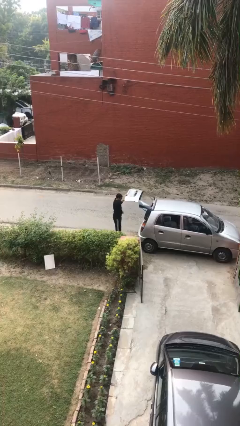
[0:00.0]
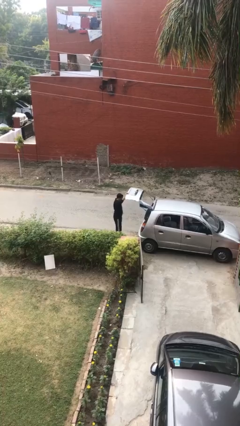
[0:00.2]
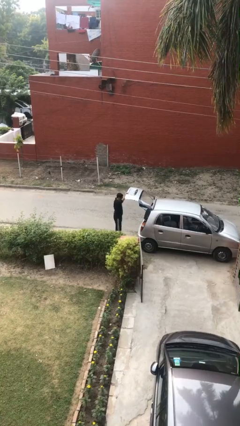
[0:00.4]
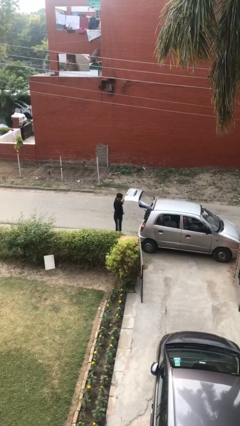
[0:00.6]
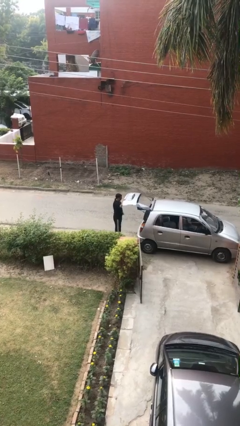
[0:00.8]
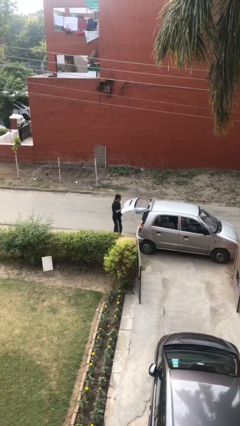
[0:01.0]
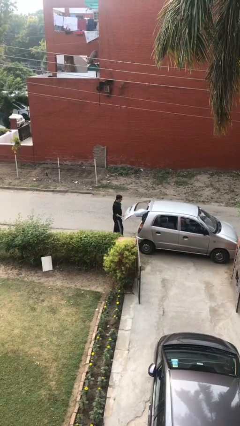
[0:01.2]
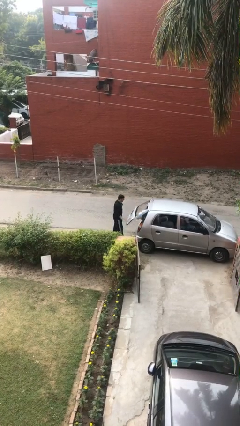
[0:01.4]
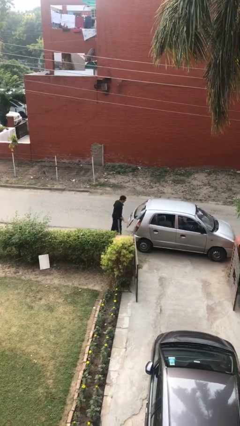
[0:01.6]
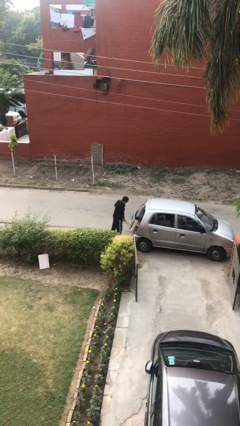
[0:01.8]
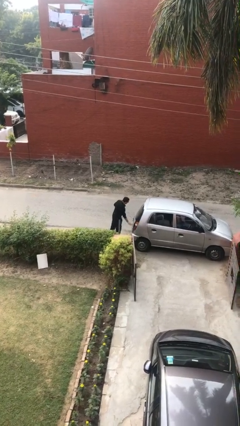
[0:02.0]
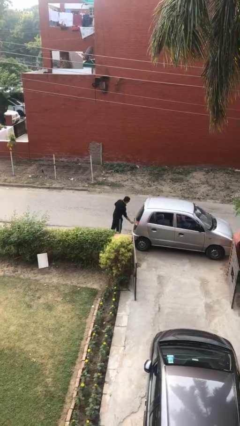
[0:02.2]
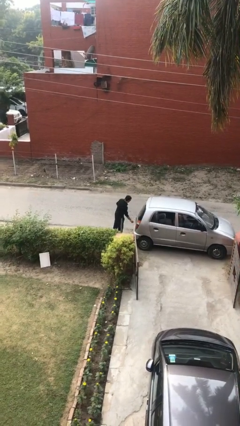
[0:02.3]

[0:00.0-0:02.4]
person closes car trunk

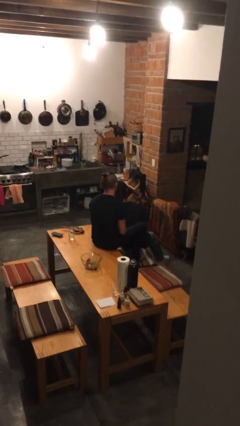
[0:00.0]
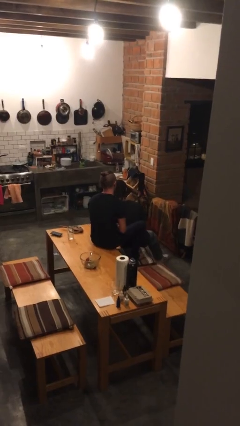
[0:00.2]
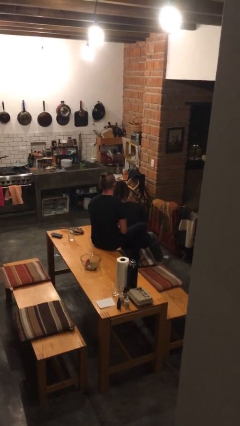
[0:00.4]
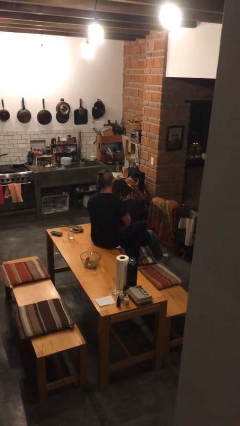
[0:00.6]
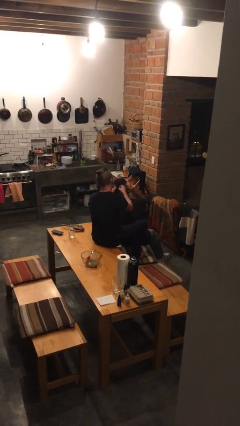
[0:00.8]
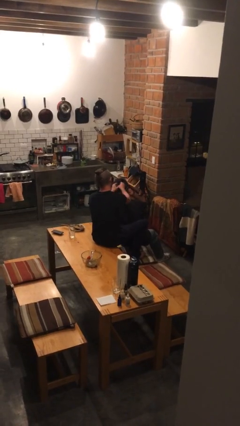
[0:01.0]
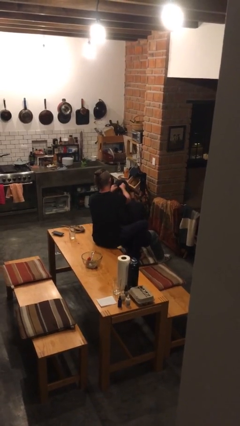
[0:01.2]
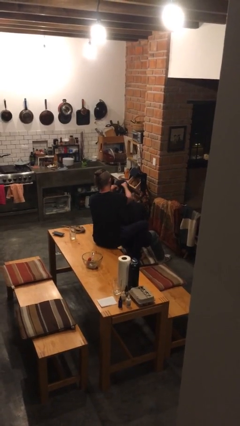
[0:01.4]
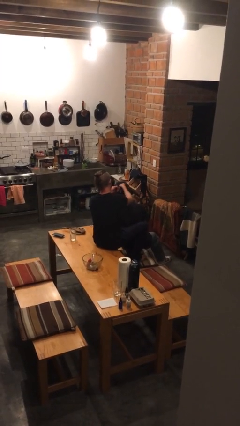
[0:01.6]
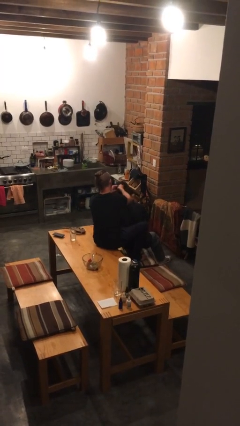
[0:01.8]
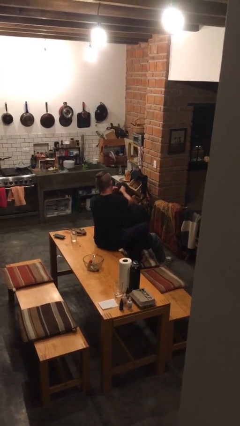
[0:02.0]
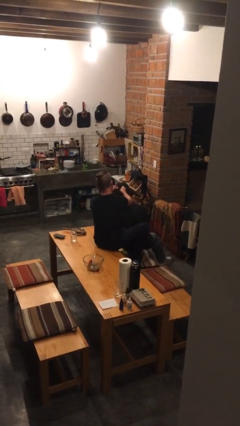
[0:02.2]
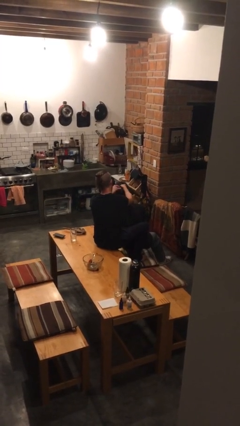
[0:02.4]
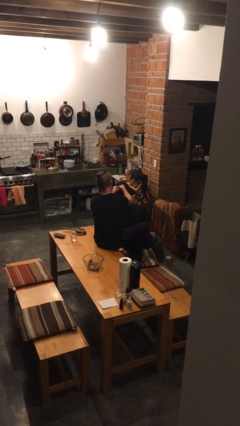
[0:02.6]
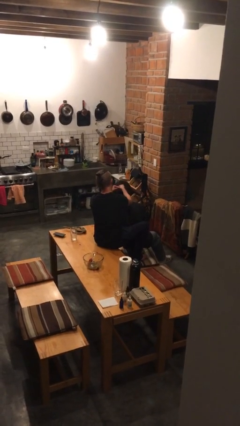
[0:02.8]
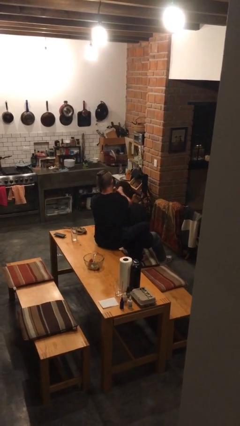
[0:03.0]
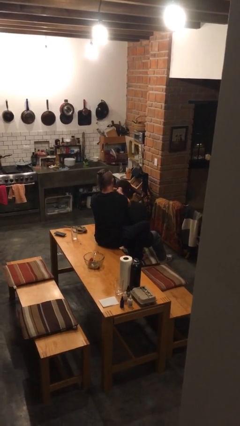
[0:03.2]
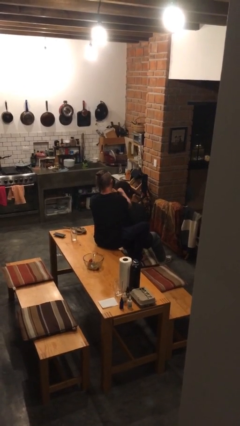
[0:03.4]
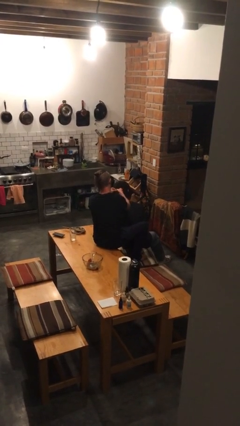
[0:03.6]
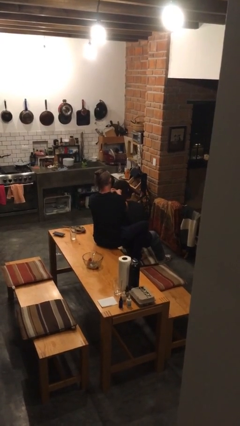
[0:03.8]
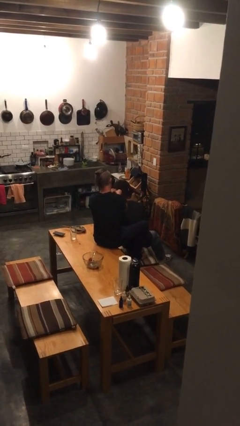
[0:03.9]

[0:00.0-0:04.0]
person braids hair of person

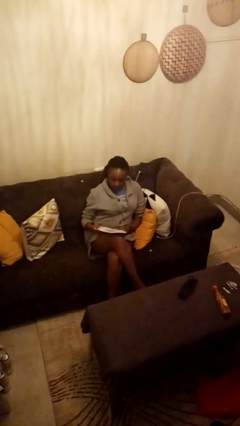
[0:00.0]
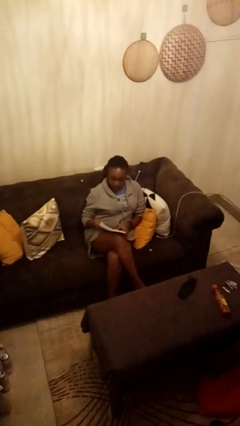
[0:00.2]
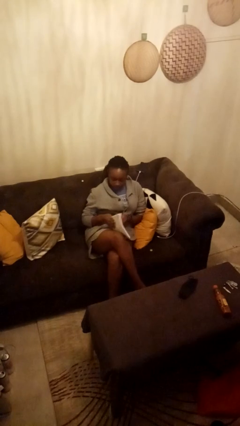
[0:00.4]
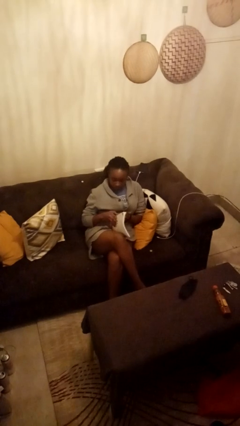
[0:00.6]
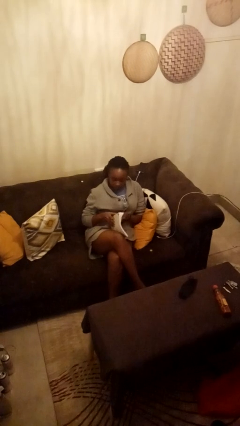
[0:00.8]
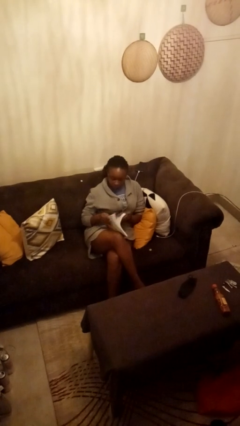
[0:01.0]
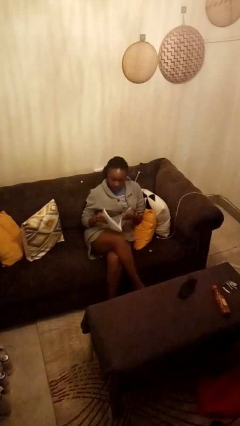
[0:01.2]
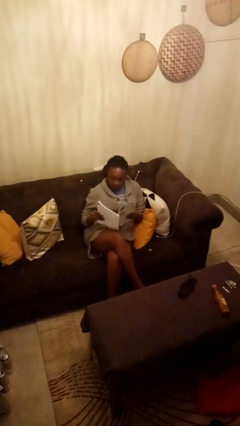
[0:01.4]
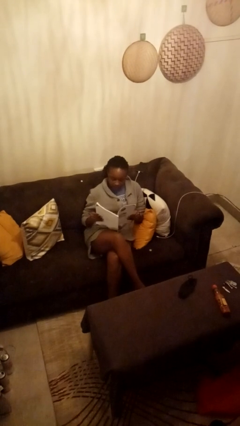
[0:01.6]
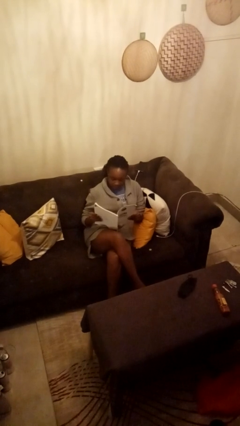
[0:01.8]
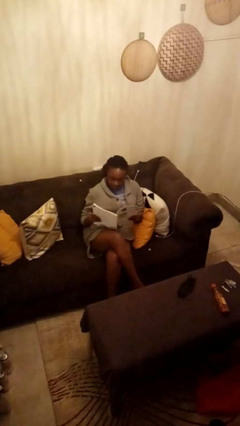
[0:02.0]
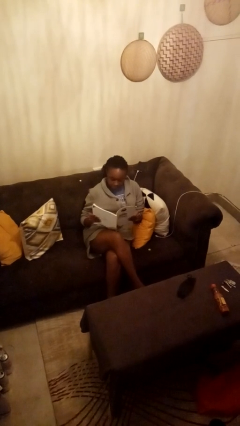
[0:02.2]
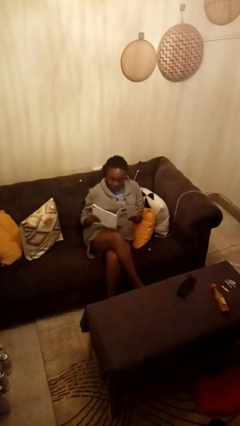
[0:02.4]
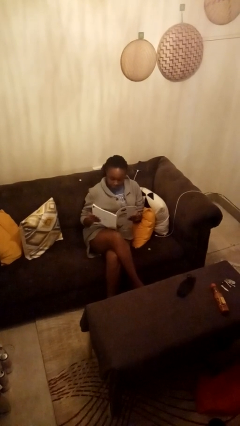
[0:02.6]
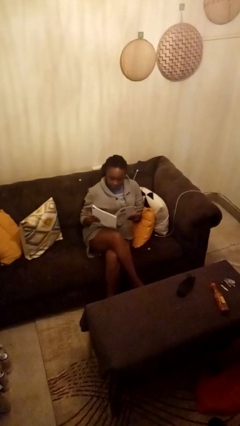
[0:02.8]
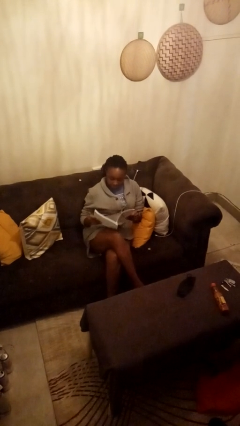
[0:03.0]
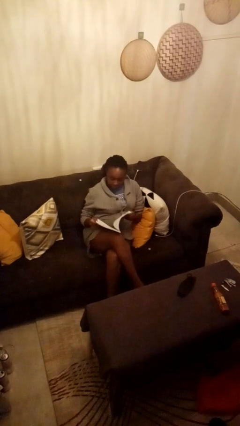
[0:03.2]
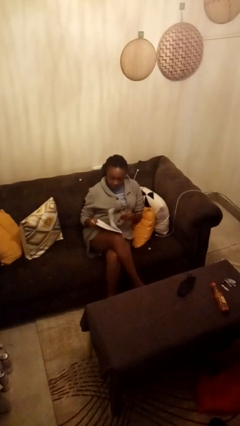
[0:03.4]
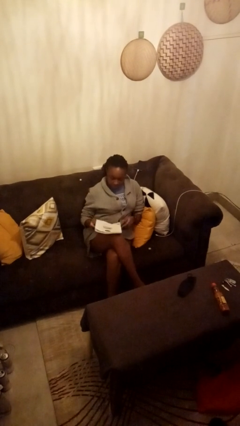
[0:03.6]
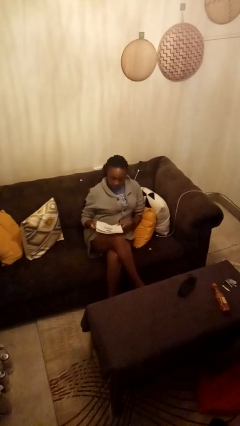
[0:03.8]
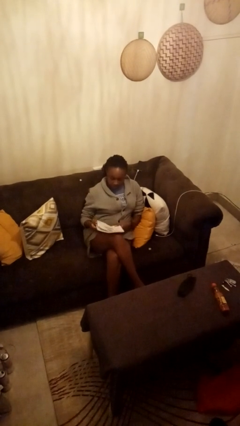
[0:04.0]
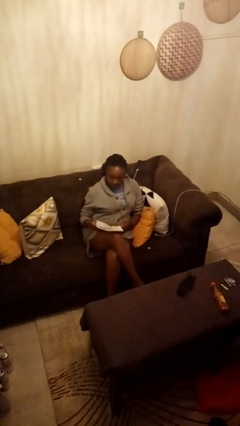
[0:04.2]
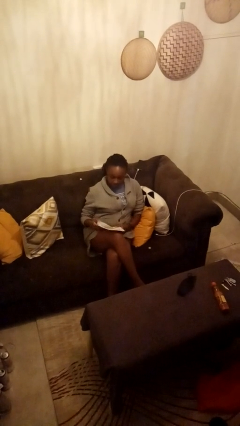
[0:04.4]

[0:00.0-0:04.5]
person reads magazine

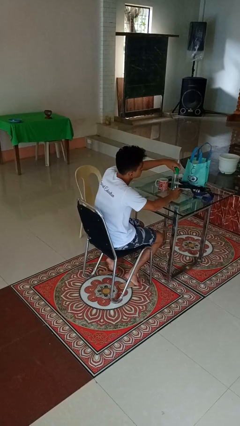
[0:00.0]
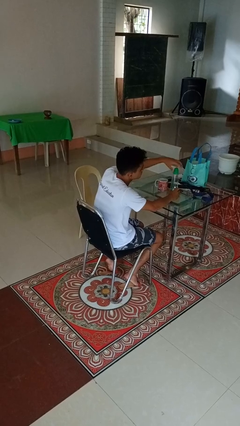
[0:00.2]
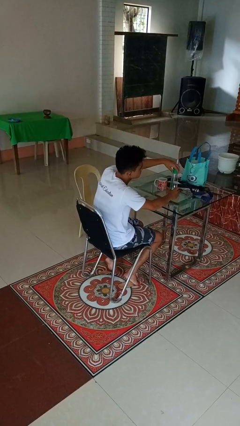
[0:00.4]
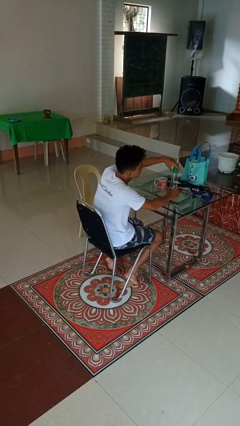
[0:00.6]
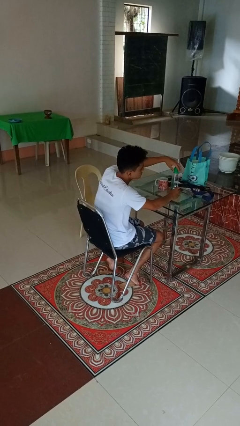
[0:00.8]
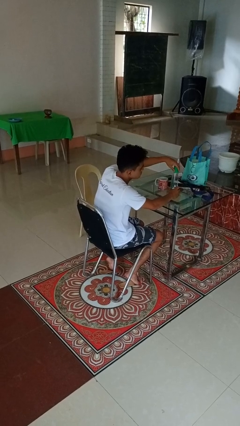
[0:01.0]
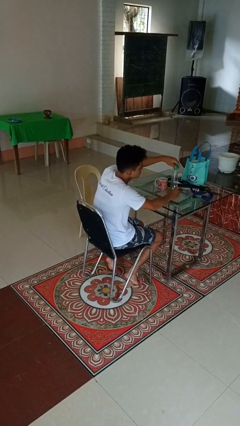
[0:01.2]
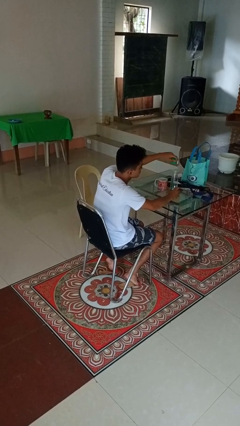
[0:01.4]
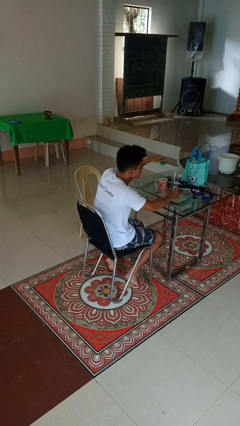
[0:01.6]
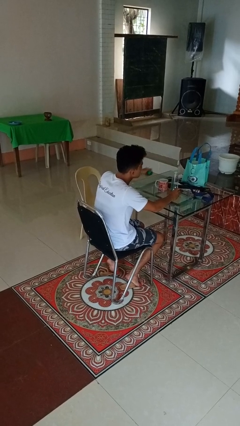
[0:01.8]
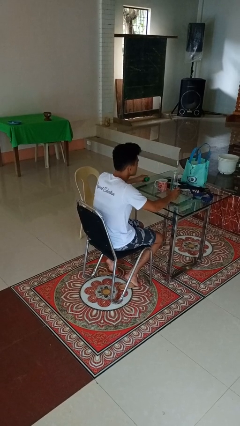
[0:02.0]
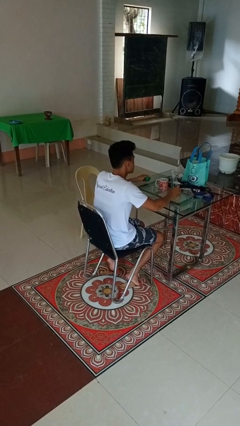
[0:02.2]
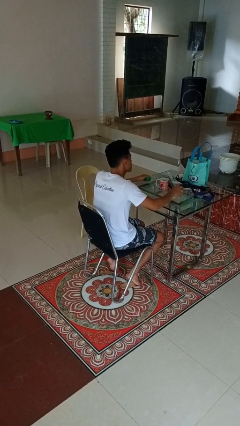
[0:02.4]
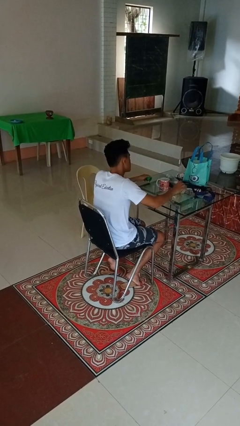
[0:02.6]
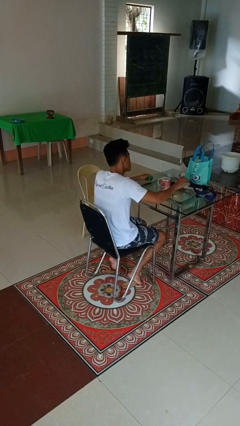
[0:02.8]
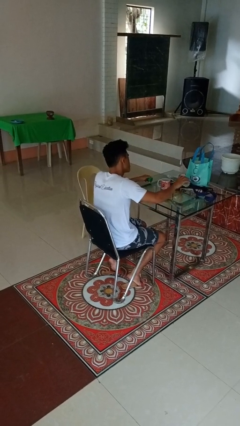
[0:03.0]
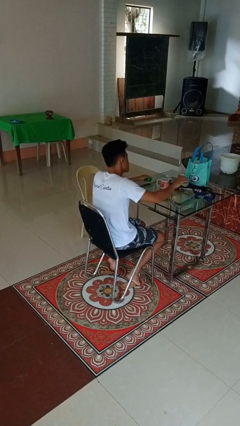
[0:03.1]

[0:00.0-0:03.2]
person unscrews lid from bottle

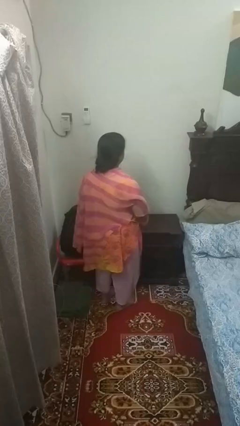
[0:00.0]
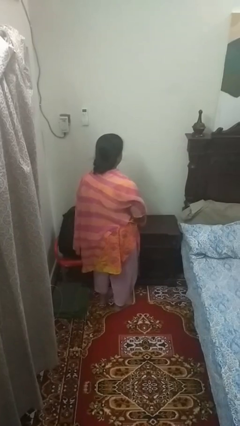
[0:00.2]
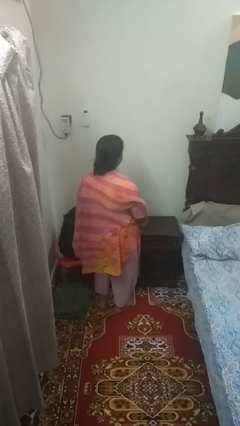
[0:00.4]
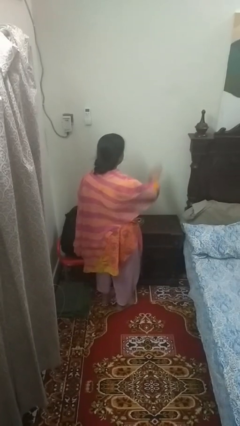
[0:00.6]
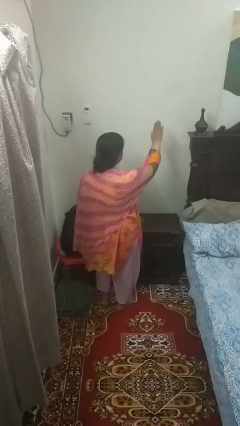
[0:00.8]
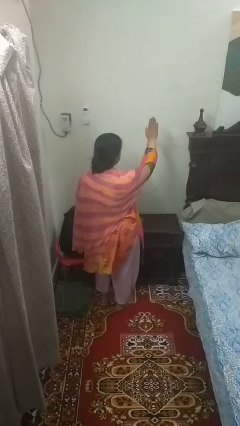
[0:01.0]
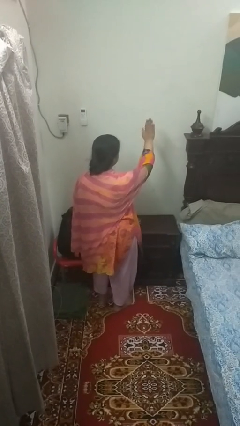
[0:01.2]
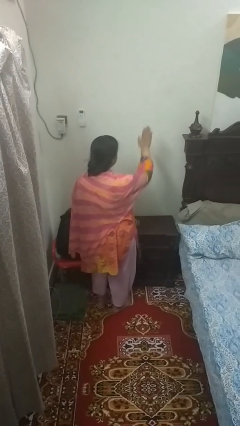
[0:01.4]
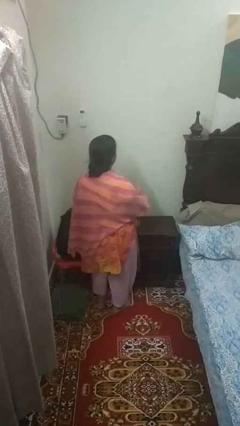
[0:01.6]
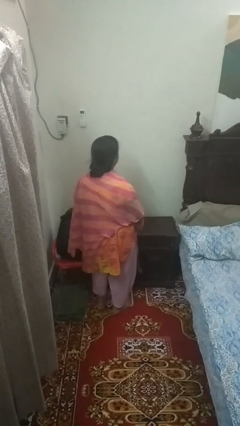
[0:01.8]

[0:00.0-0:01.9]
person gestures stop

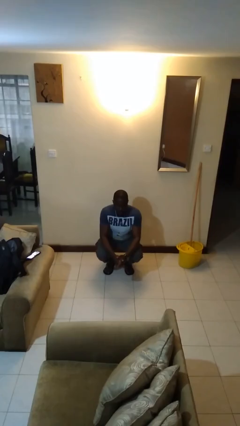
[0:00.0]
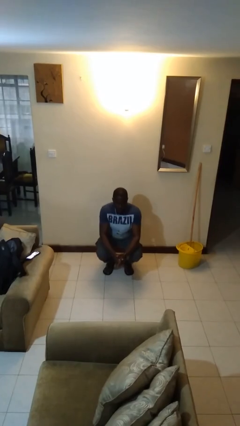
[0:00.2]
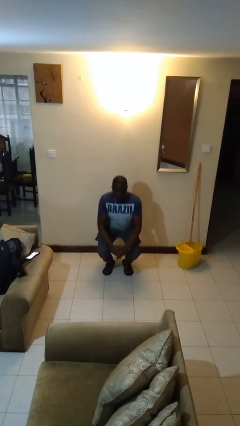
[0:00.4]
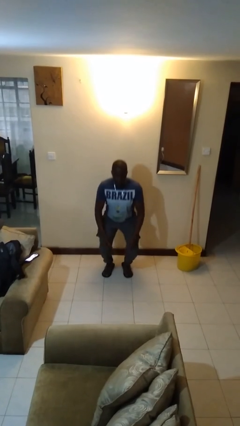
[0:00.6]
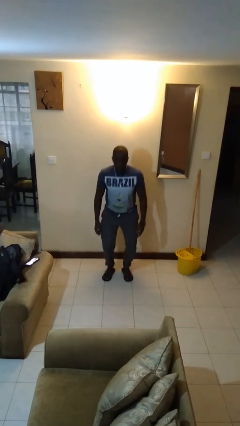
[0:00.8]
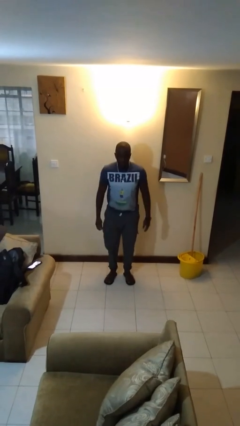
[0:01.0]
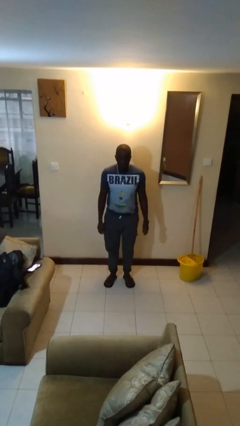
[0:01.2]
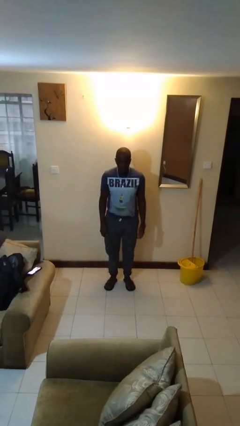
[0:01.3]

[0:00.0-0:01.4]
person stands up

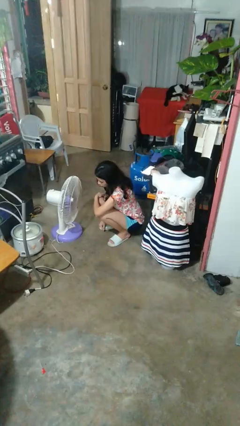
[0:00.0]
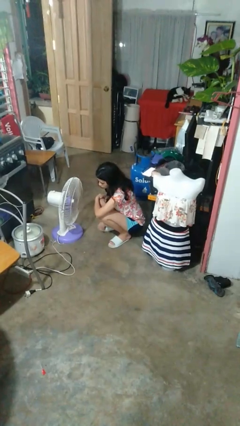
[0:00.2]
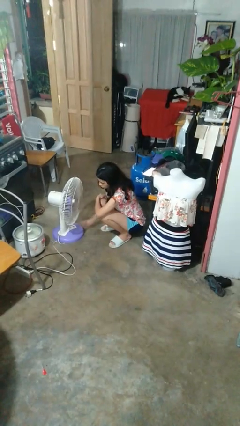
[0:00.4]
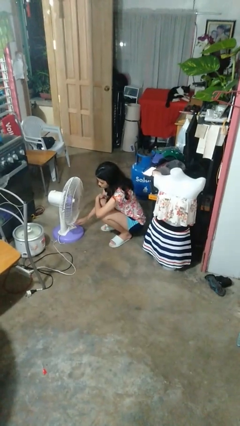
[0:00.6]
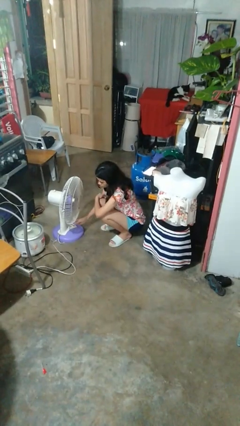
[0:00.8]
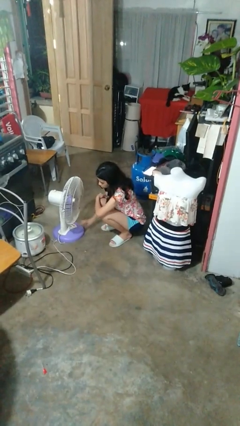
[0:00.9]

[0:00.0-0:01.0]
person turns off fan
